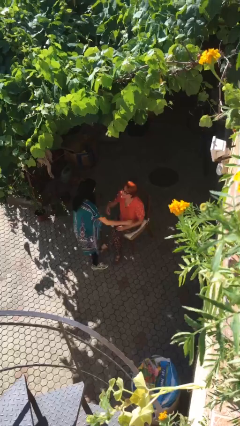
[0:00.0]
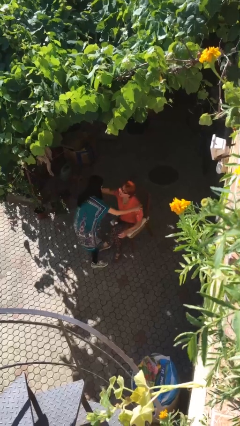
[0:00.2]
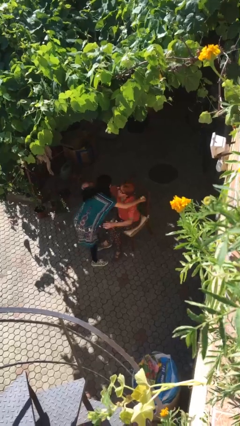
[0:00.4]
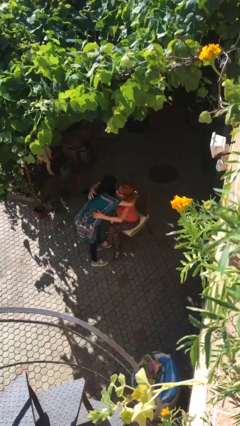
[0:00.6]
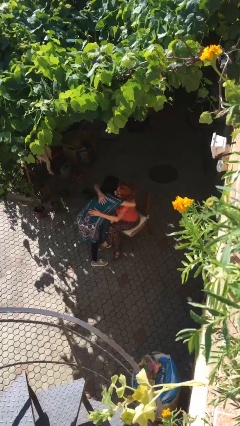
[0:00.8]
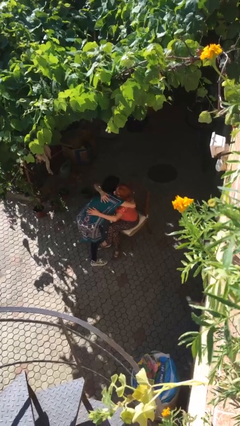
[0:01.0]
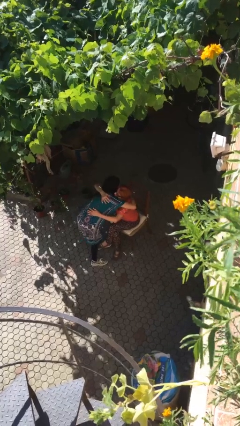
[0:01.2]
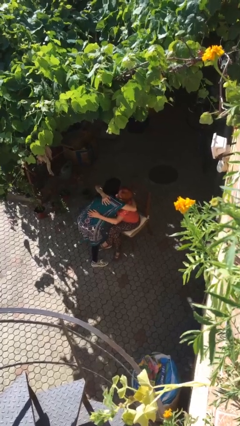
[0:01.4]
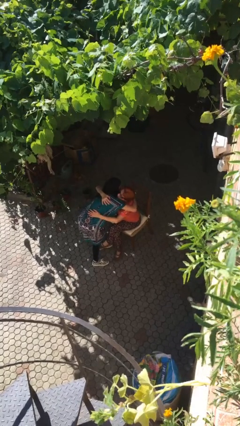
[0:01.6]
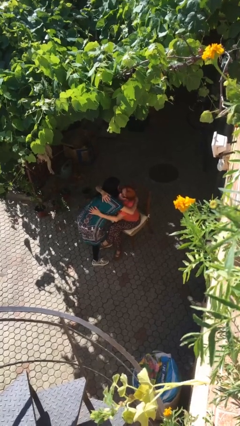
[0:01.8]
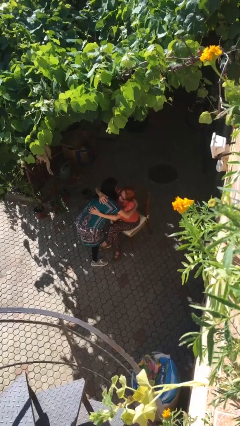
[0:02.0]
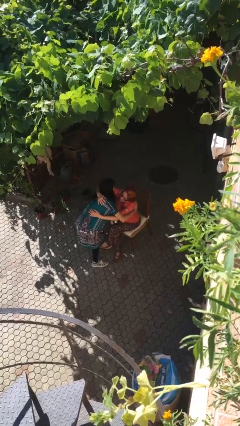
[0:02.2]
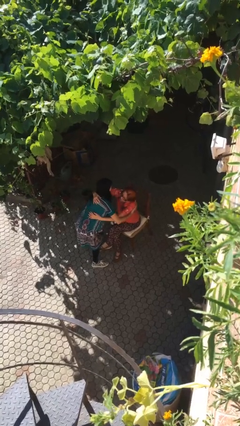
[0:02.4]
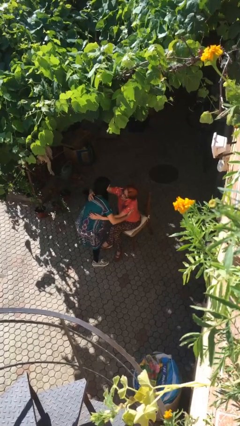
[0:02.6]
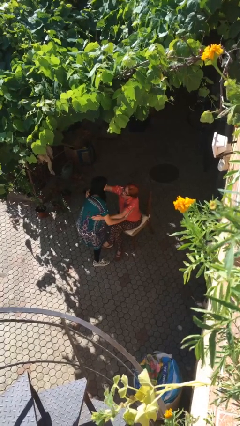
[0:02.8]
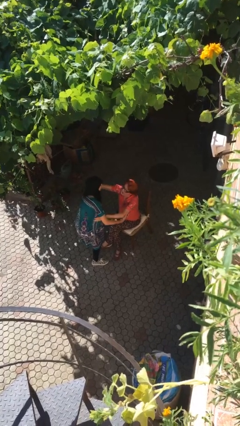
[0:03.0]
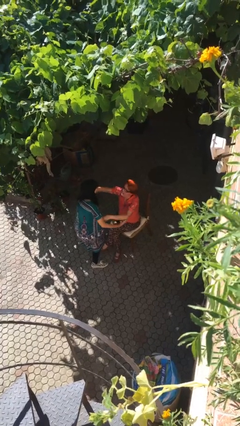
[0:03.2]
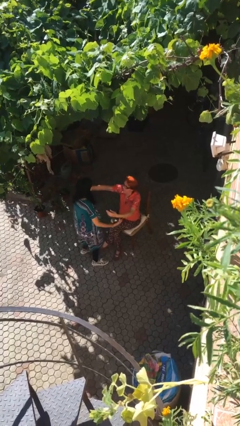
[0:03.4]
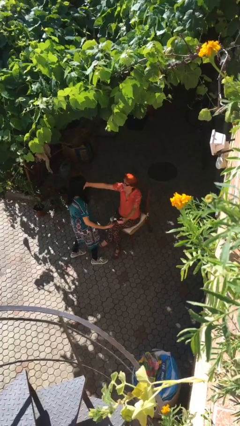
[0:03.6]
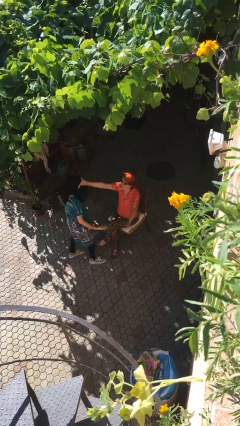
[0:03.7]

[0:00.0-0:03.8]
person embraces person

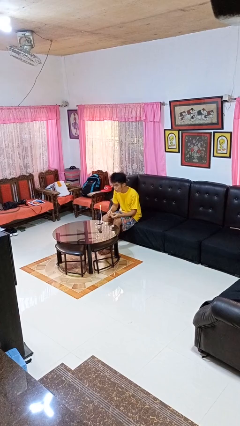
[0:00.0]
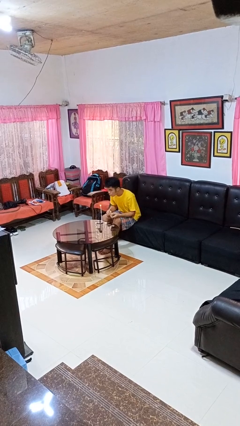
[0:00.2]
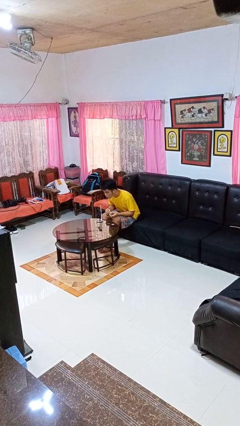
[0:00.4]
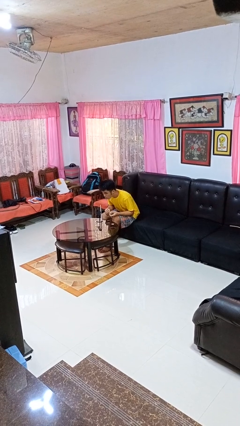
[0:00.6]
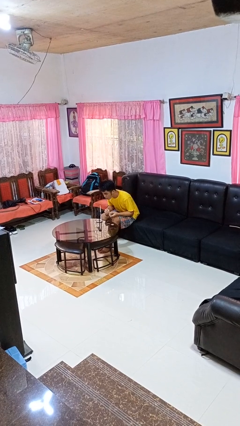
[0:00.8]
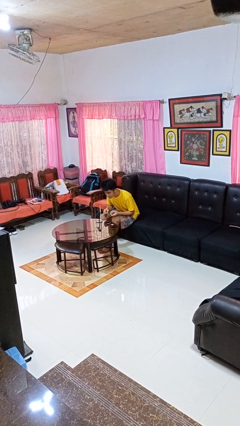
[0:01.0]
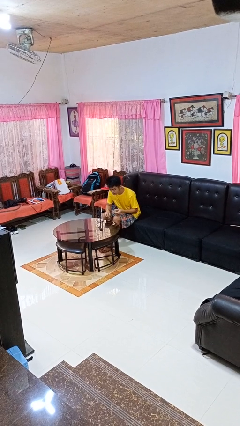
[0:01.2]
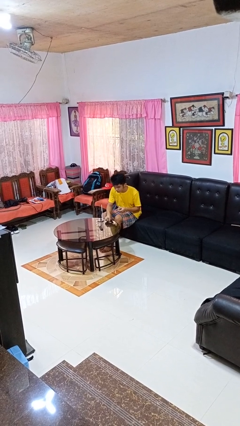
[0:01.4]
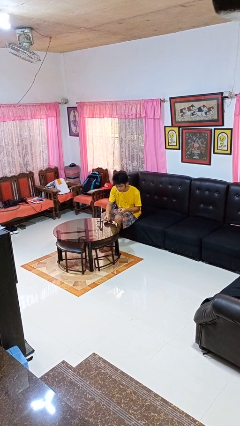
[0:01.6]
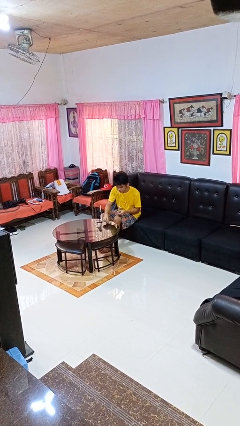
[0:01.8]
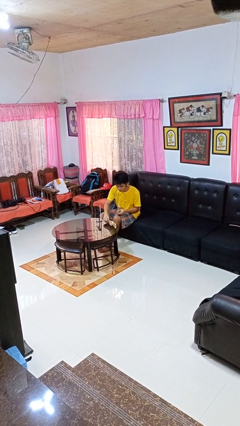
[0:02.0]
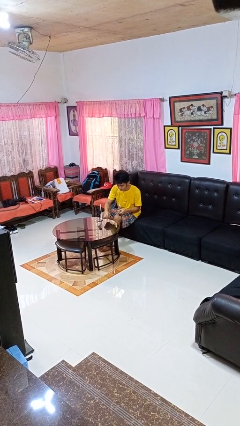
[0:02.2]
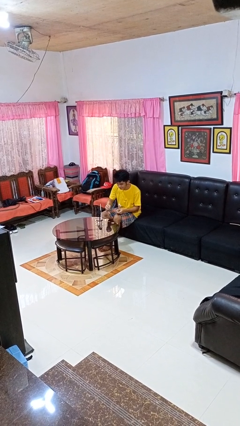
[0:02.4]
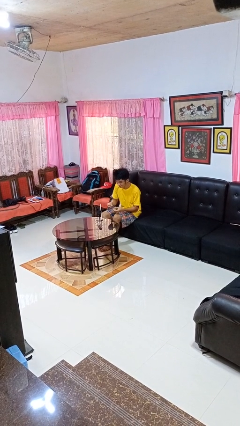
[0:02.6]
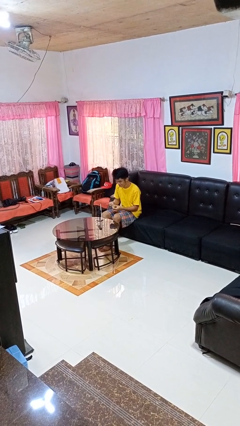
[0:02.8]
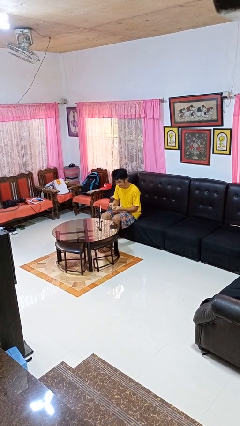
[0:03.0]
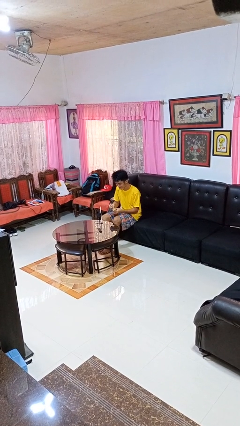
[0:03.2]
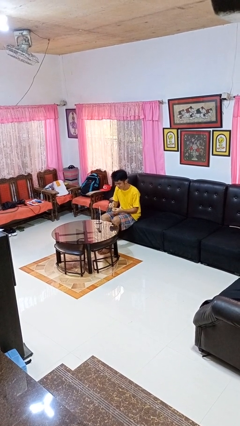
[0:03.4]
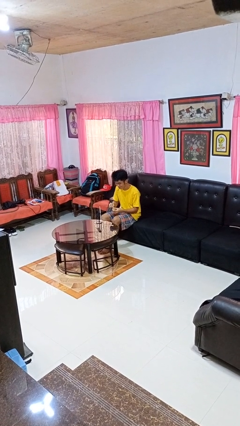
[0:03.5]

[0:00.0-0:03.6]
person extinguishes candle

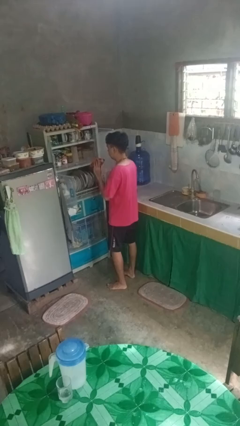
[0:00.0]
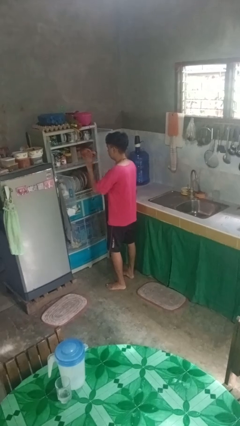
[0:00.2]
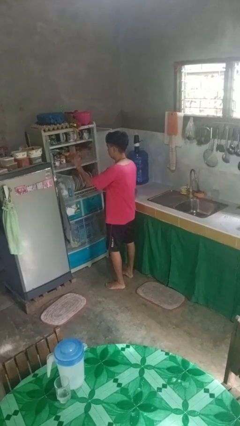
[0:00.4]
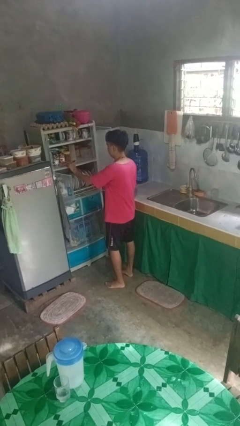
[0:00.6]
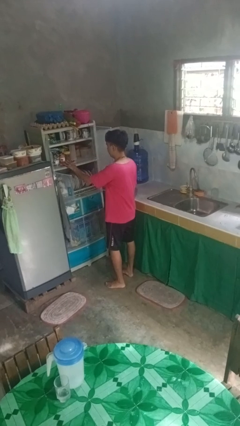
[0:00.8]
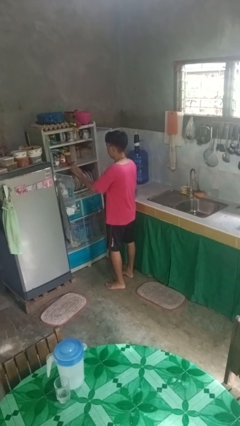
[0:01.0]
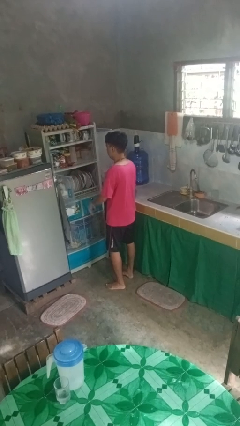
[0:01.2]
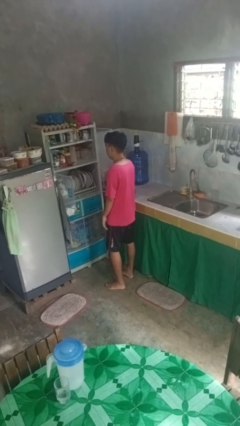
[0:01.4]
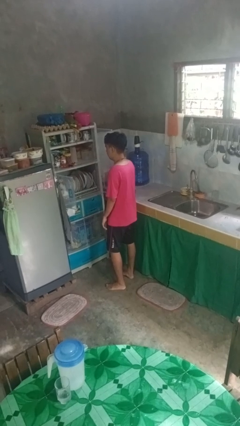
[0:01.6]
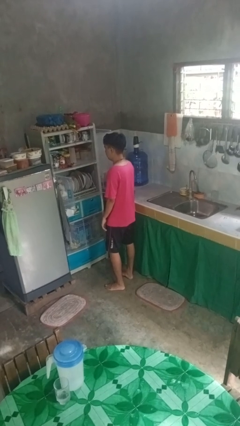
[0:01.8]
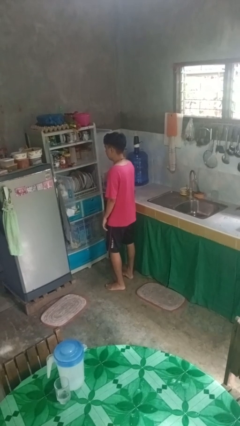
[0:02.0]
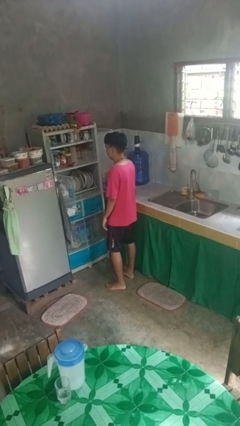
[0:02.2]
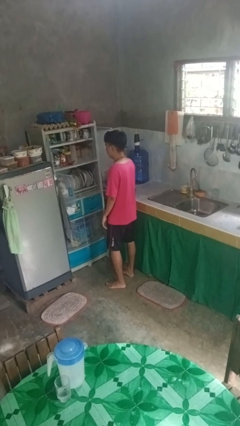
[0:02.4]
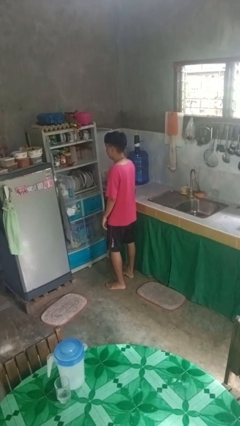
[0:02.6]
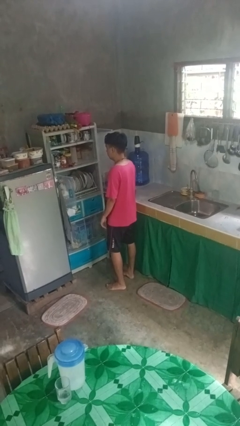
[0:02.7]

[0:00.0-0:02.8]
person puts object in cabinet

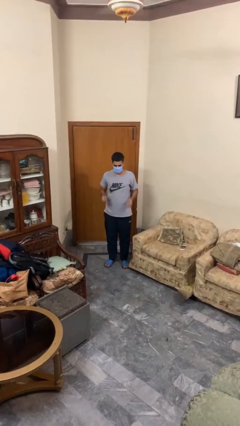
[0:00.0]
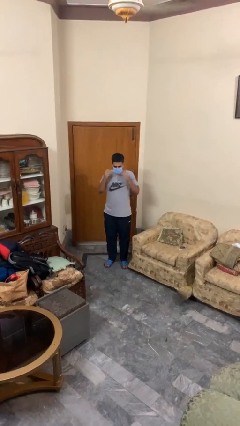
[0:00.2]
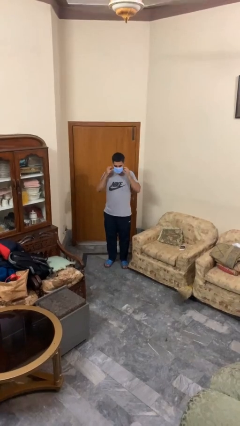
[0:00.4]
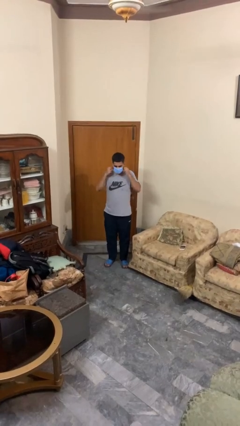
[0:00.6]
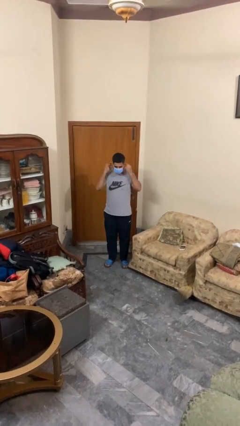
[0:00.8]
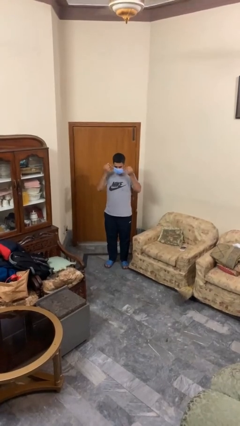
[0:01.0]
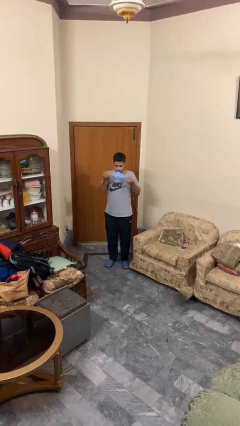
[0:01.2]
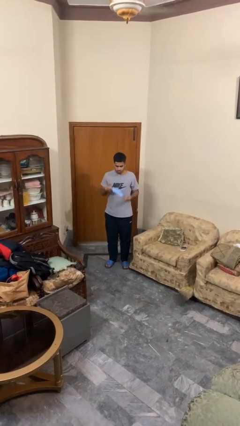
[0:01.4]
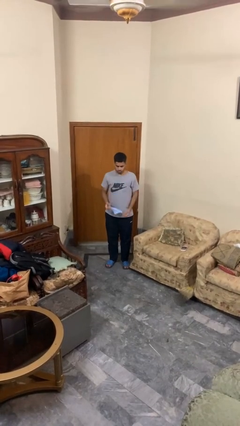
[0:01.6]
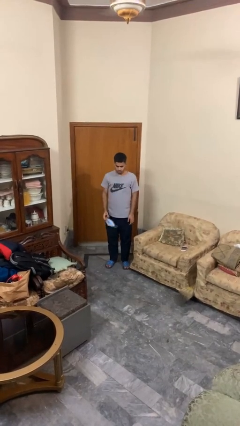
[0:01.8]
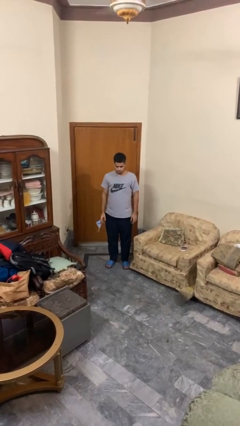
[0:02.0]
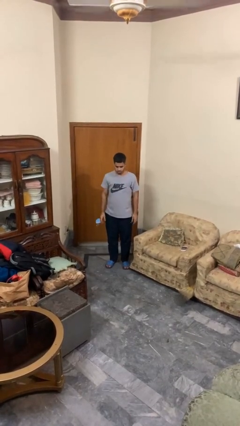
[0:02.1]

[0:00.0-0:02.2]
person takes off facemask

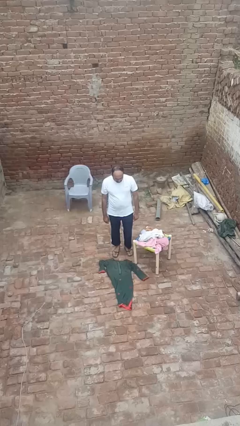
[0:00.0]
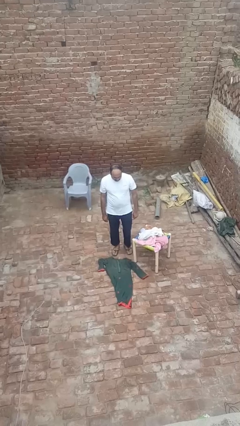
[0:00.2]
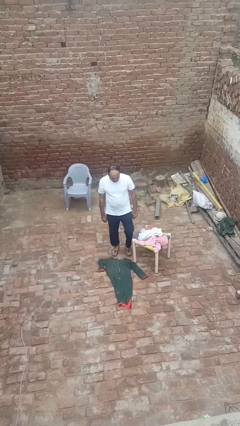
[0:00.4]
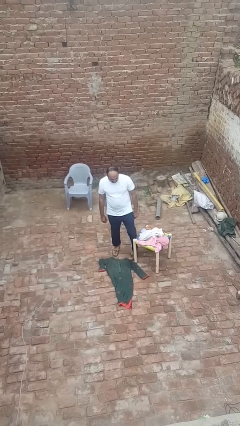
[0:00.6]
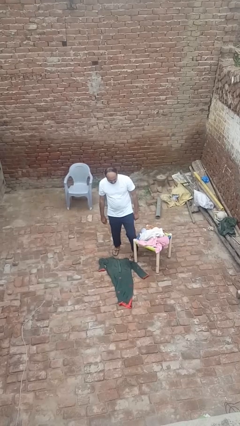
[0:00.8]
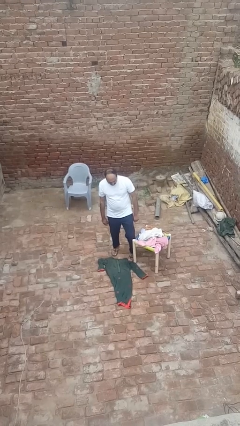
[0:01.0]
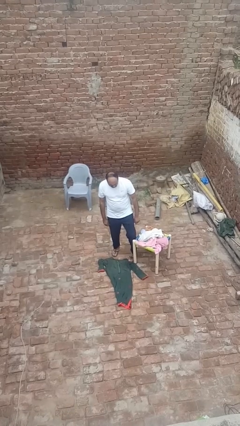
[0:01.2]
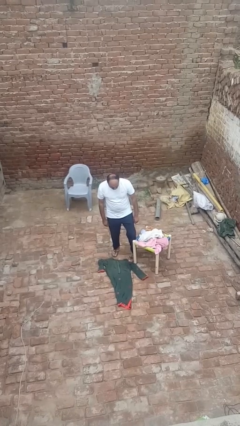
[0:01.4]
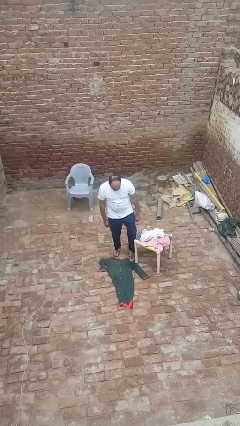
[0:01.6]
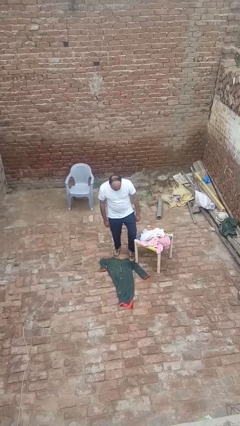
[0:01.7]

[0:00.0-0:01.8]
person trips on object on floor

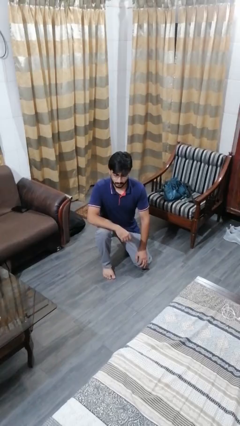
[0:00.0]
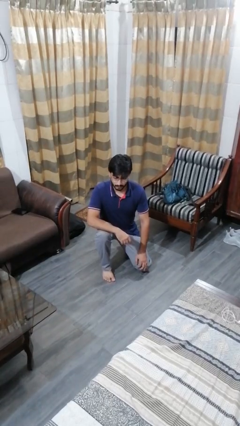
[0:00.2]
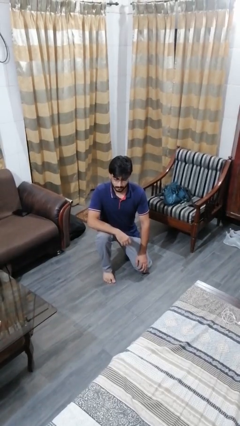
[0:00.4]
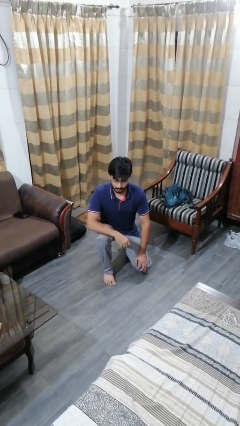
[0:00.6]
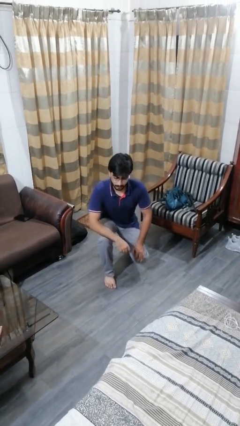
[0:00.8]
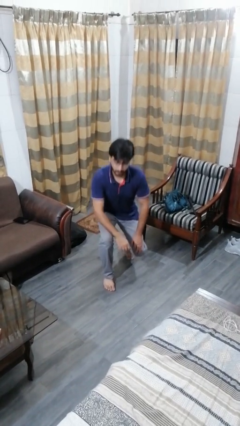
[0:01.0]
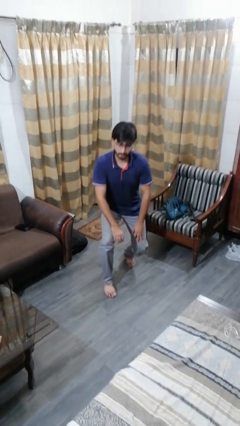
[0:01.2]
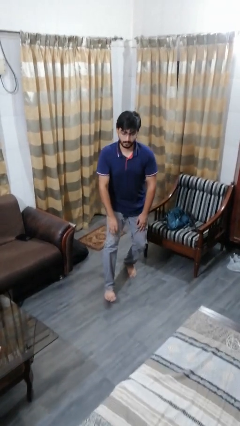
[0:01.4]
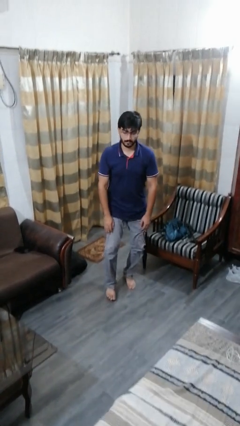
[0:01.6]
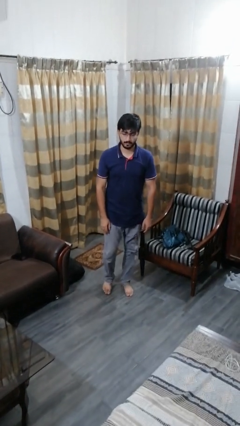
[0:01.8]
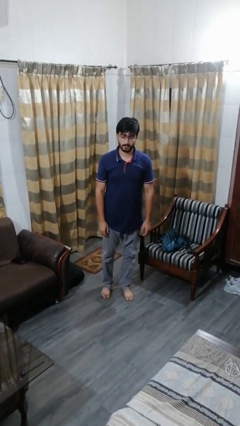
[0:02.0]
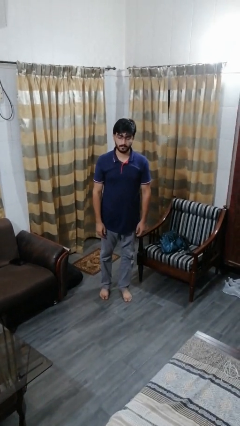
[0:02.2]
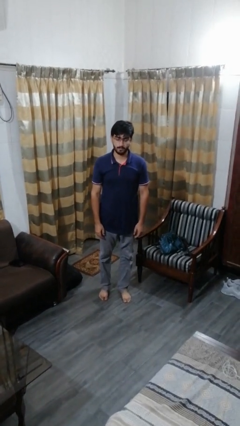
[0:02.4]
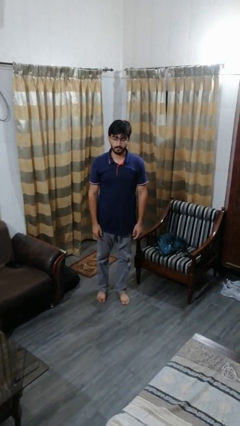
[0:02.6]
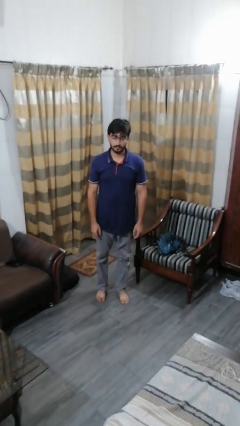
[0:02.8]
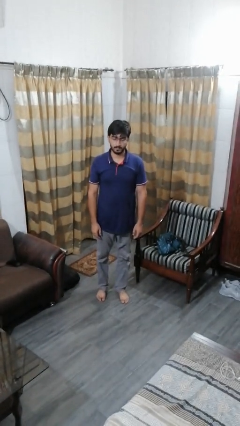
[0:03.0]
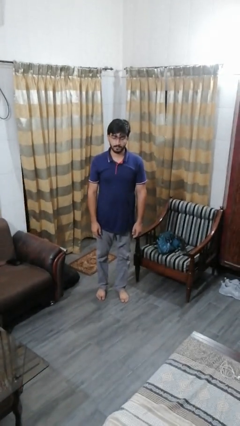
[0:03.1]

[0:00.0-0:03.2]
person stands up from floor

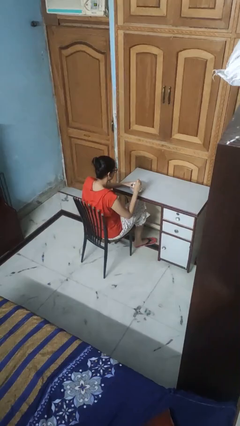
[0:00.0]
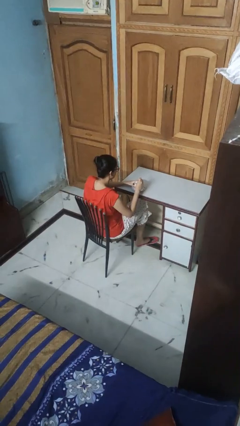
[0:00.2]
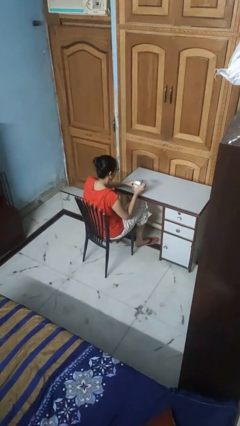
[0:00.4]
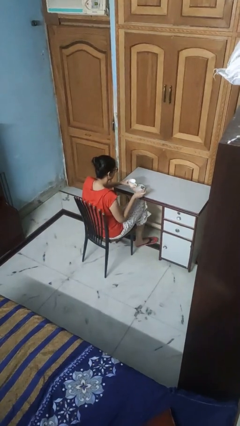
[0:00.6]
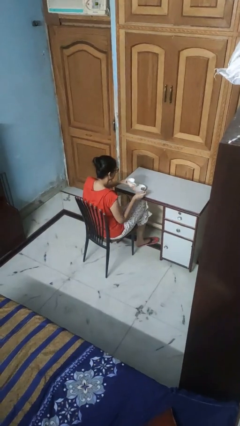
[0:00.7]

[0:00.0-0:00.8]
person stirs mug
